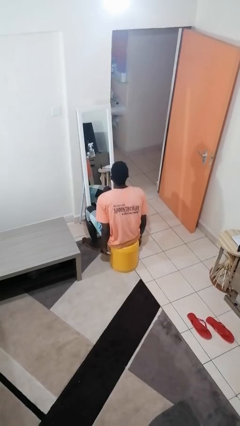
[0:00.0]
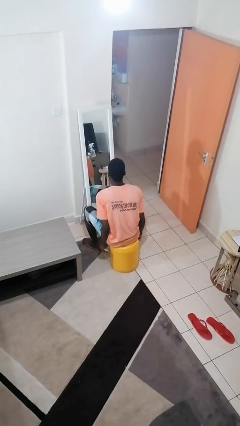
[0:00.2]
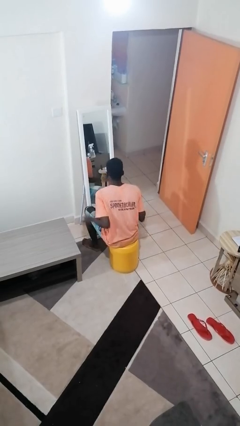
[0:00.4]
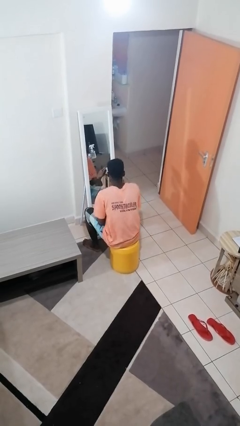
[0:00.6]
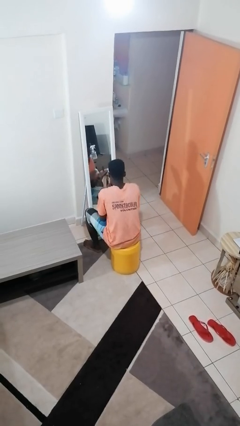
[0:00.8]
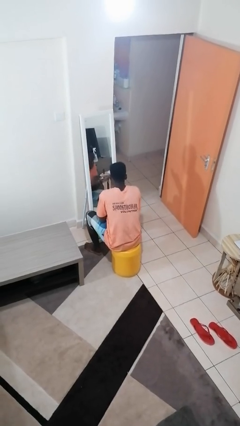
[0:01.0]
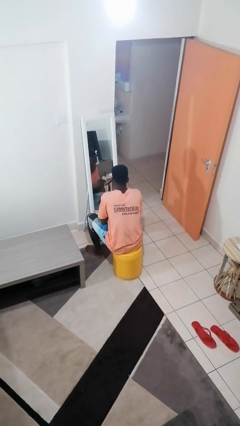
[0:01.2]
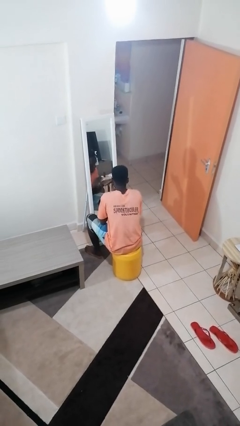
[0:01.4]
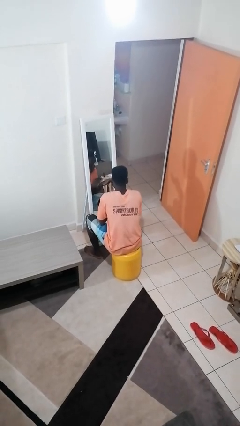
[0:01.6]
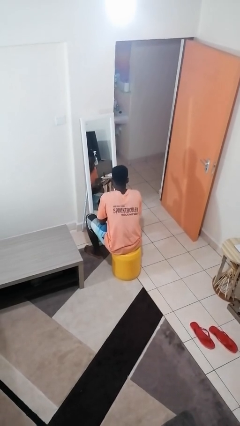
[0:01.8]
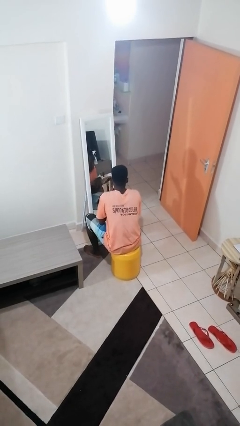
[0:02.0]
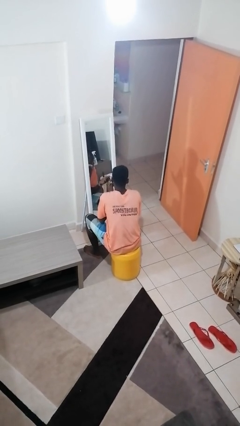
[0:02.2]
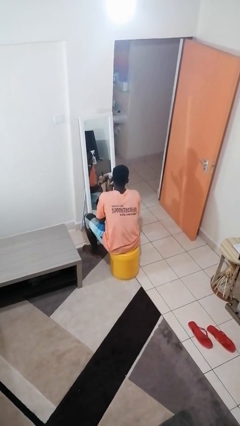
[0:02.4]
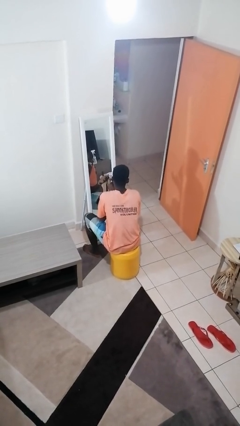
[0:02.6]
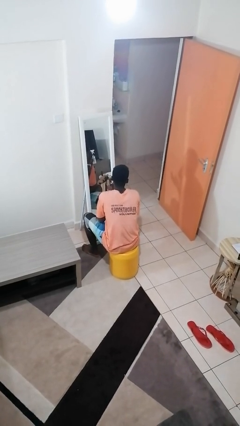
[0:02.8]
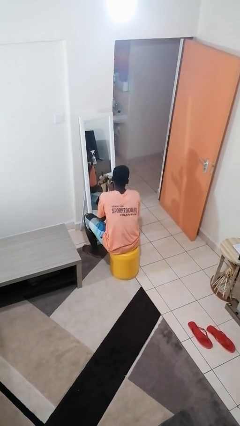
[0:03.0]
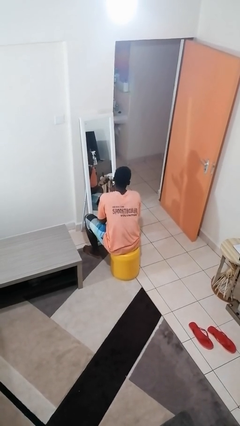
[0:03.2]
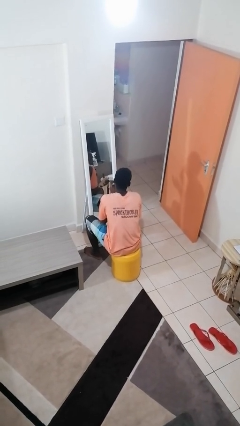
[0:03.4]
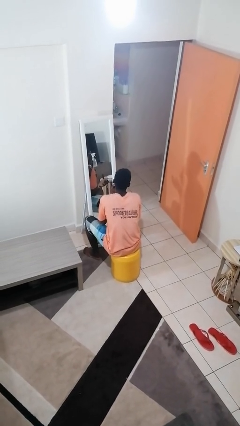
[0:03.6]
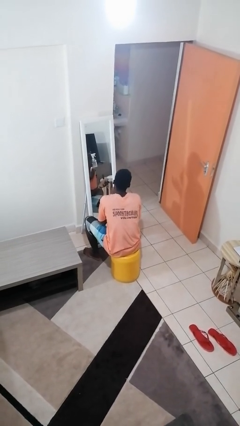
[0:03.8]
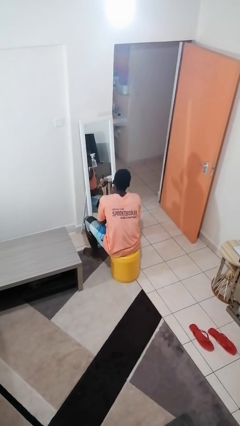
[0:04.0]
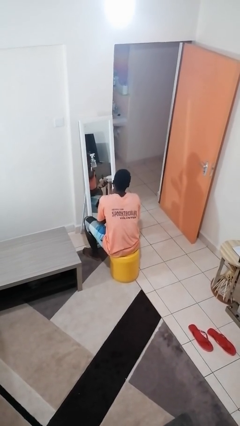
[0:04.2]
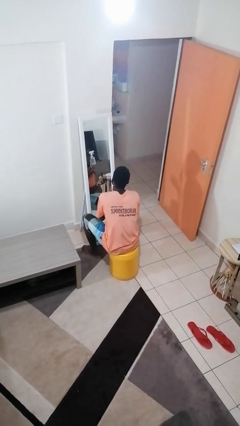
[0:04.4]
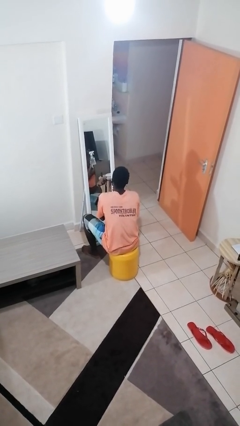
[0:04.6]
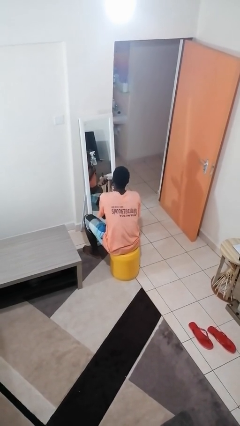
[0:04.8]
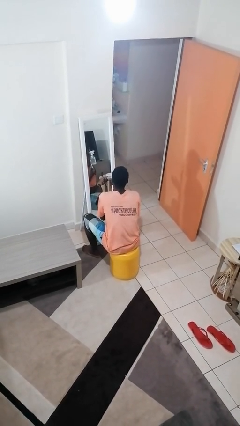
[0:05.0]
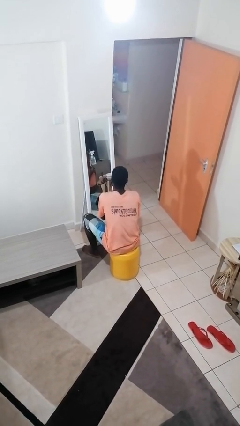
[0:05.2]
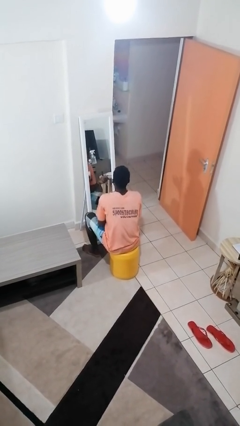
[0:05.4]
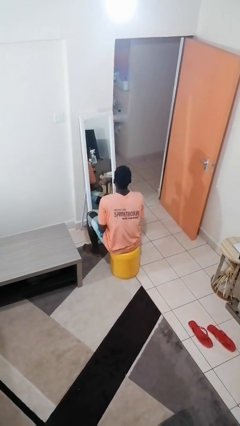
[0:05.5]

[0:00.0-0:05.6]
person applies foundation makeup

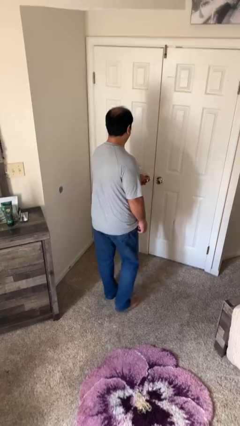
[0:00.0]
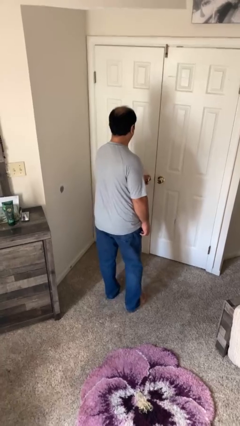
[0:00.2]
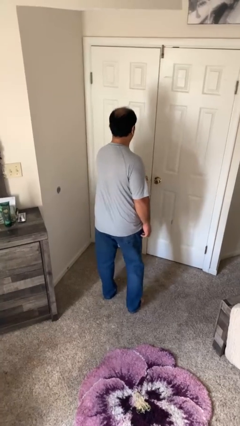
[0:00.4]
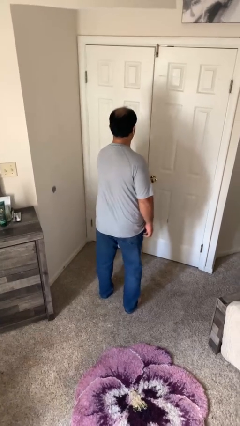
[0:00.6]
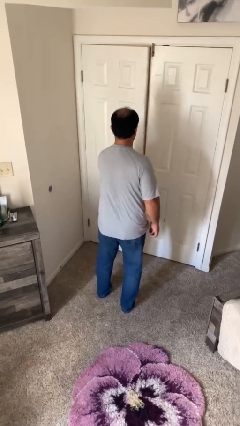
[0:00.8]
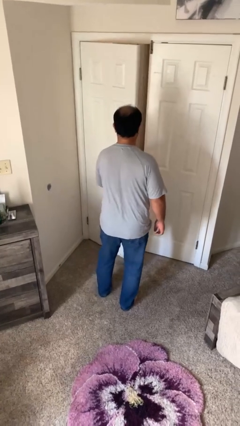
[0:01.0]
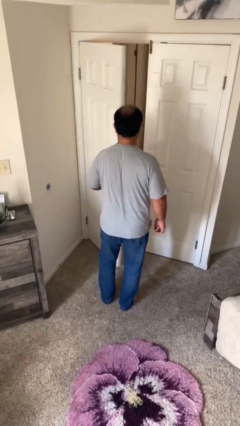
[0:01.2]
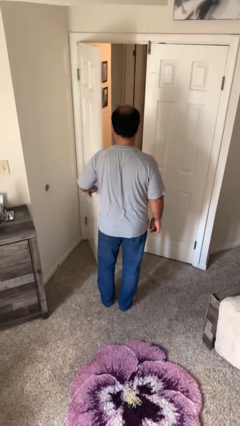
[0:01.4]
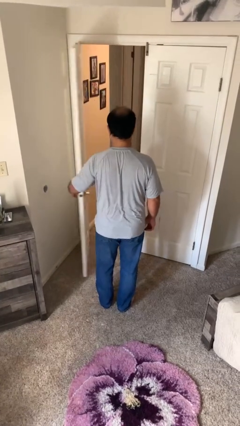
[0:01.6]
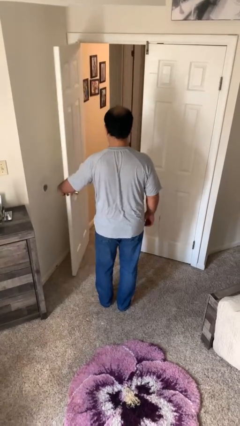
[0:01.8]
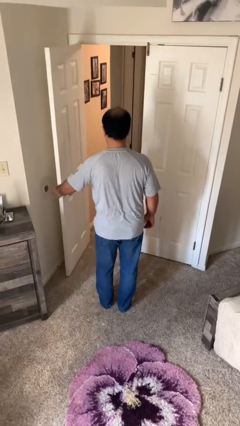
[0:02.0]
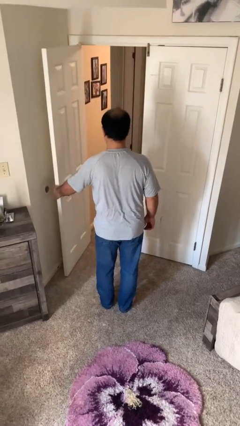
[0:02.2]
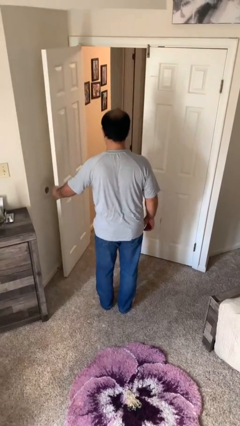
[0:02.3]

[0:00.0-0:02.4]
person opens facility door

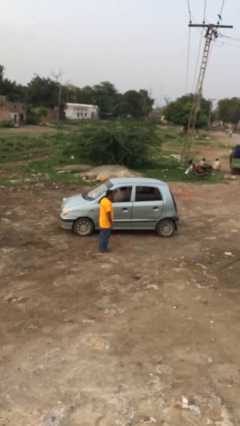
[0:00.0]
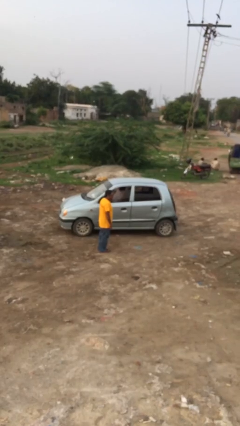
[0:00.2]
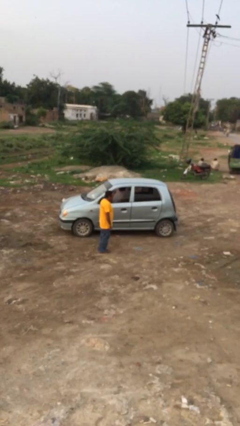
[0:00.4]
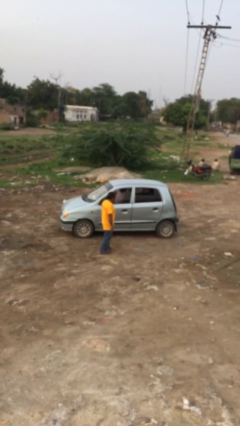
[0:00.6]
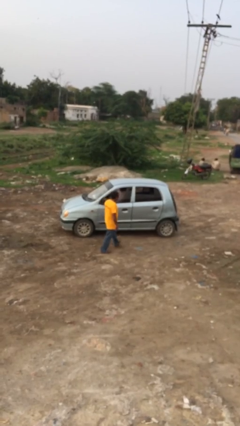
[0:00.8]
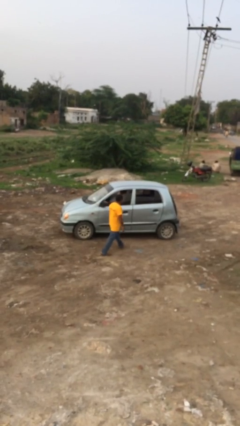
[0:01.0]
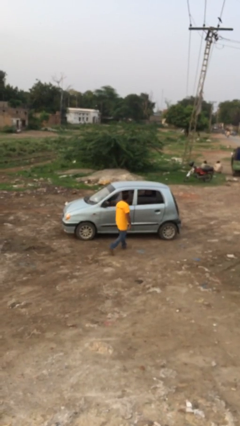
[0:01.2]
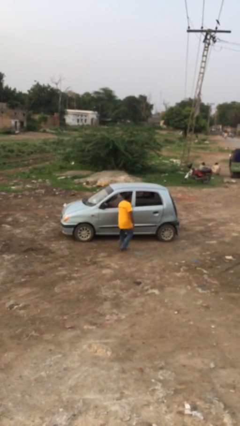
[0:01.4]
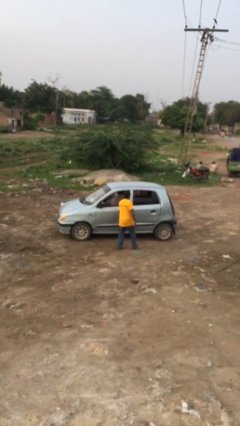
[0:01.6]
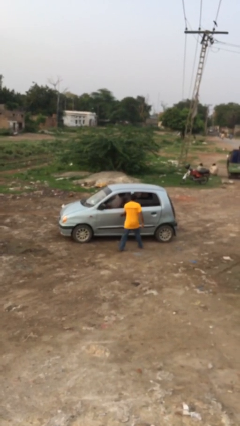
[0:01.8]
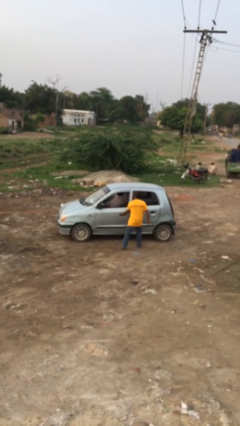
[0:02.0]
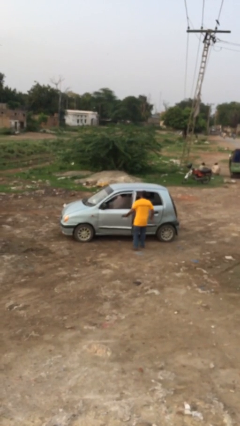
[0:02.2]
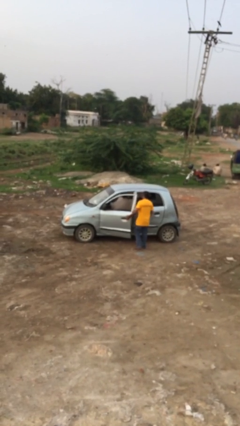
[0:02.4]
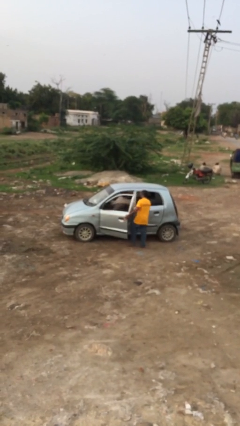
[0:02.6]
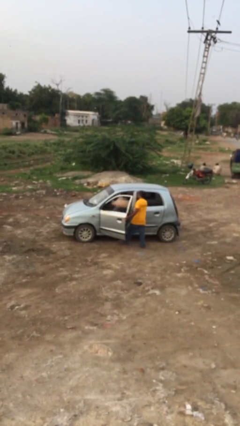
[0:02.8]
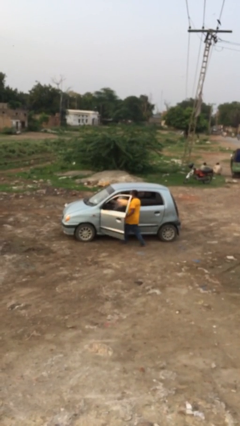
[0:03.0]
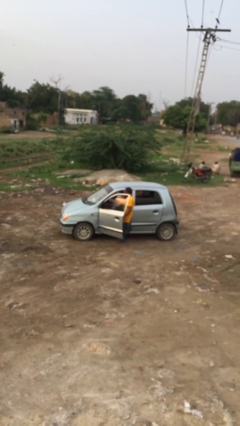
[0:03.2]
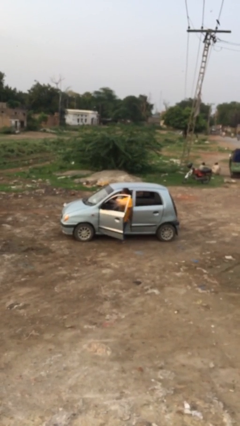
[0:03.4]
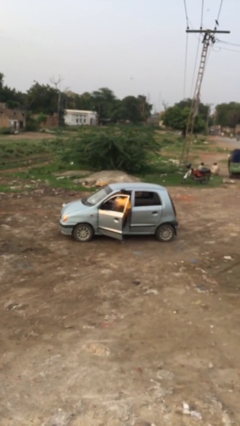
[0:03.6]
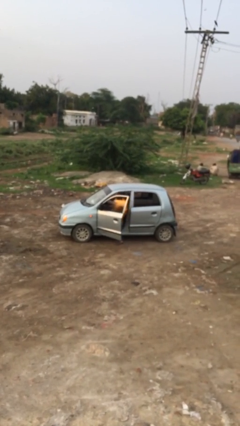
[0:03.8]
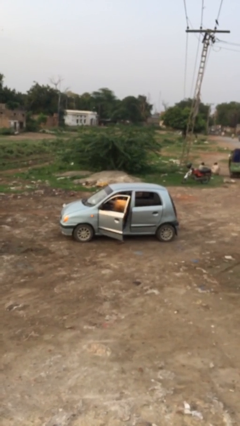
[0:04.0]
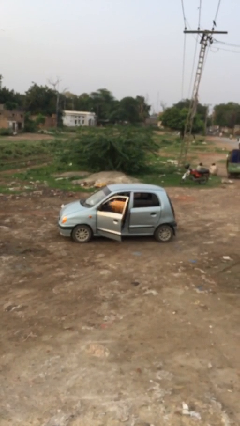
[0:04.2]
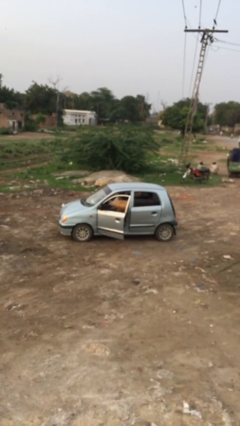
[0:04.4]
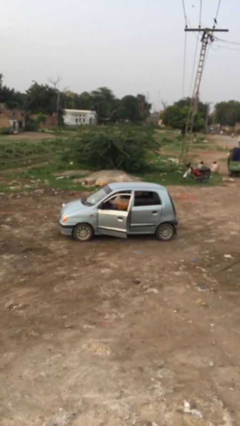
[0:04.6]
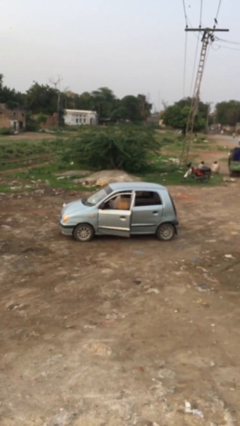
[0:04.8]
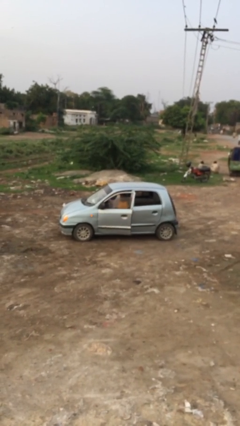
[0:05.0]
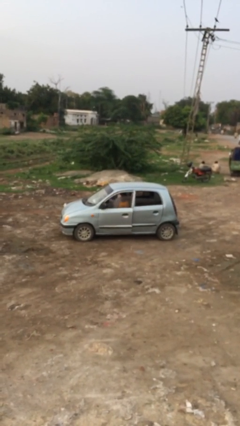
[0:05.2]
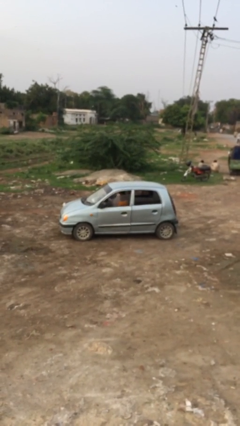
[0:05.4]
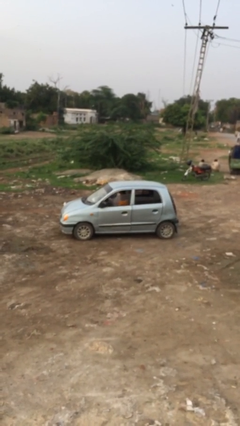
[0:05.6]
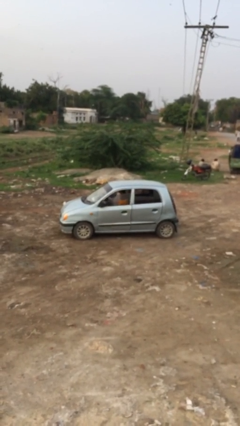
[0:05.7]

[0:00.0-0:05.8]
car picks up person

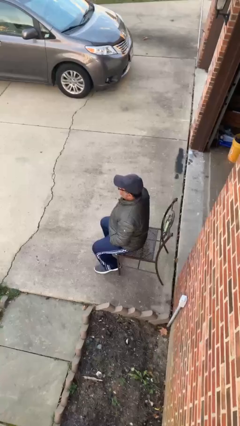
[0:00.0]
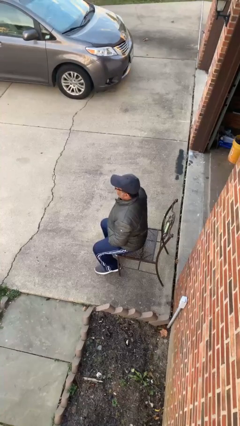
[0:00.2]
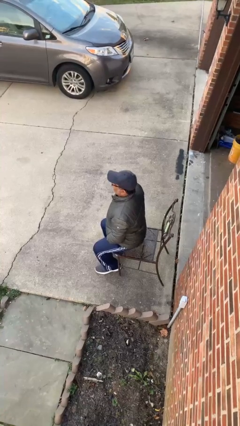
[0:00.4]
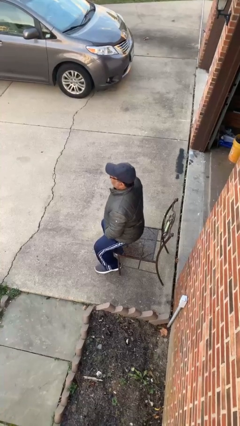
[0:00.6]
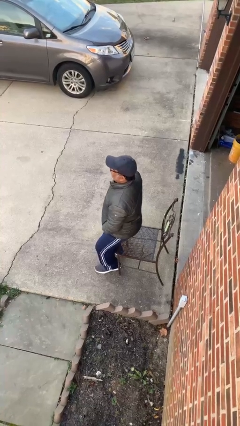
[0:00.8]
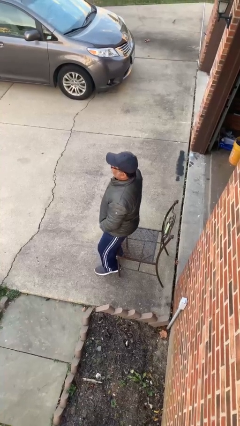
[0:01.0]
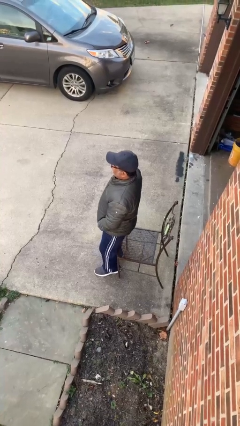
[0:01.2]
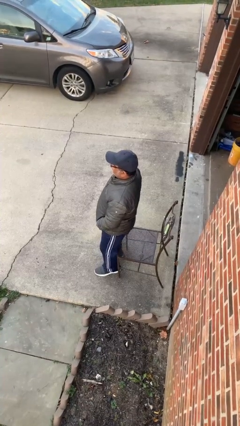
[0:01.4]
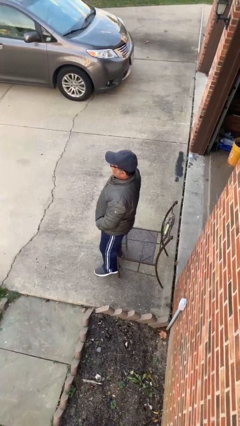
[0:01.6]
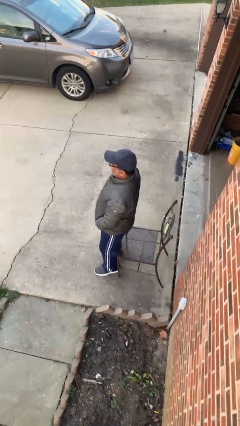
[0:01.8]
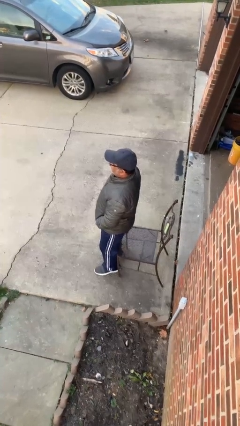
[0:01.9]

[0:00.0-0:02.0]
person stands up

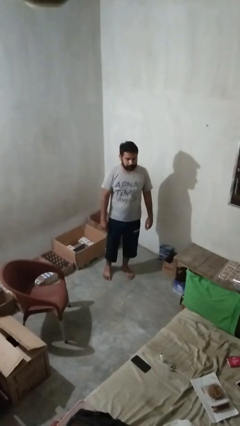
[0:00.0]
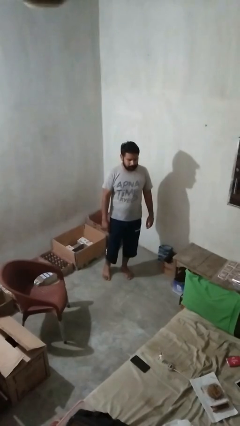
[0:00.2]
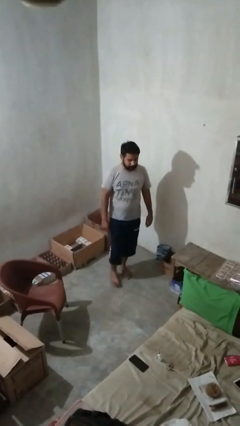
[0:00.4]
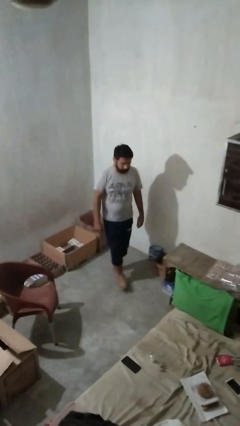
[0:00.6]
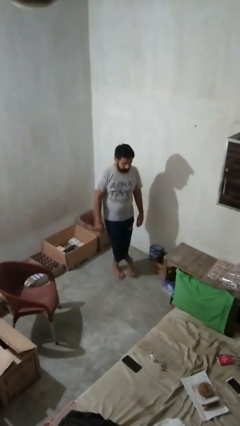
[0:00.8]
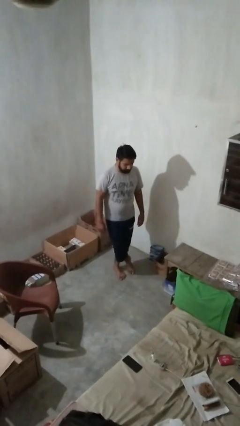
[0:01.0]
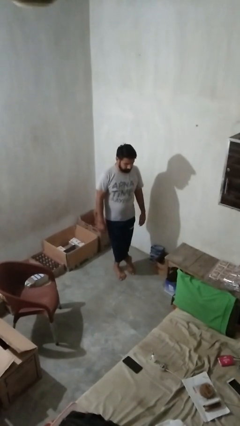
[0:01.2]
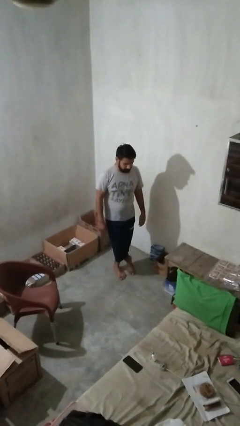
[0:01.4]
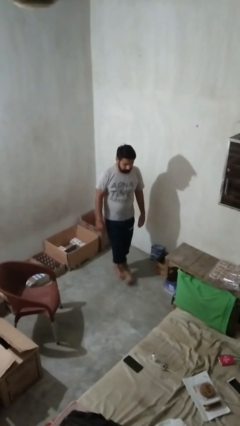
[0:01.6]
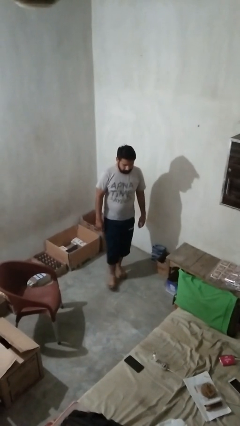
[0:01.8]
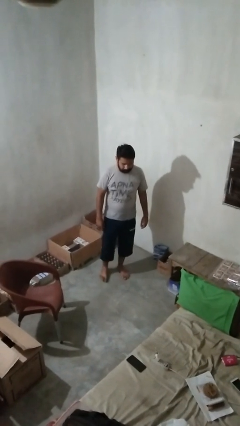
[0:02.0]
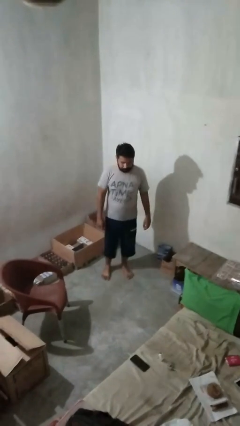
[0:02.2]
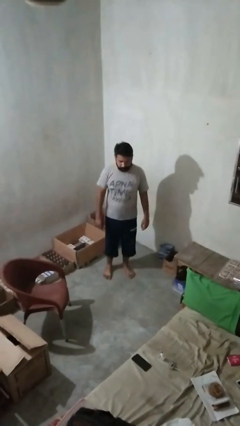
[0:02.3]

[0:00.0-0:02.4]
person crosses legs
